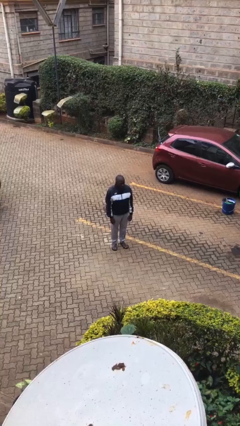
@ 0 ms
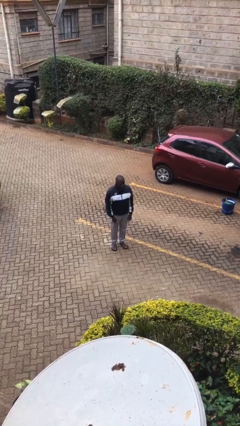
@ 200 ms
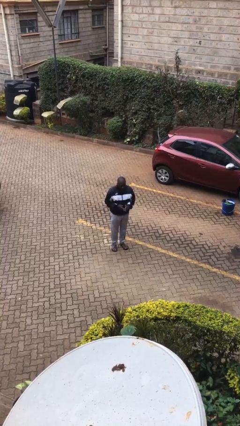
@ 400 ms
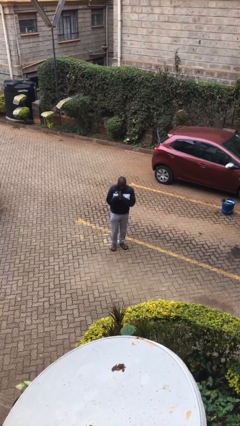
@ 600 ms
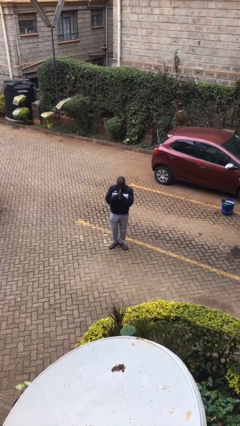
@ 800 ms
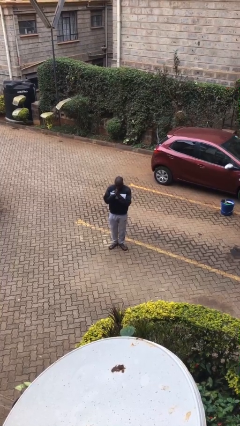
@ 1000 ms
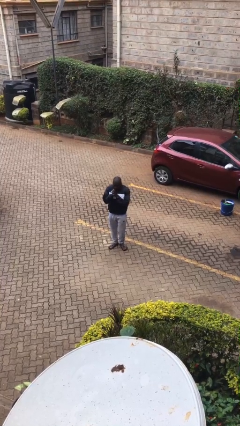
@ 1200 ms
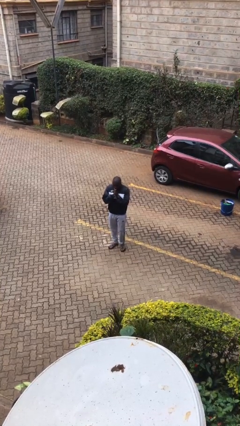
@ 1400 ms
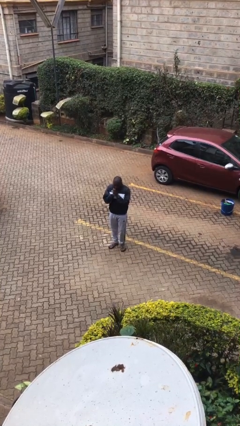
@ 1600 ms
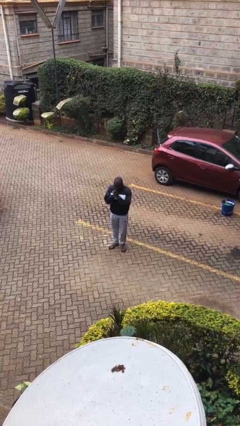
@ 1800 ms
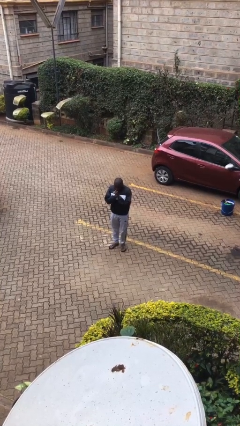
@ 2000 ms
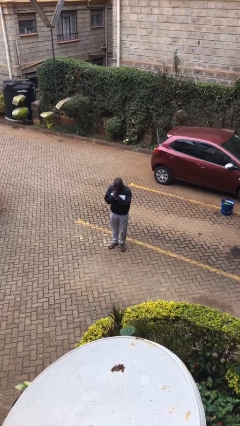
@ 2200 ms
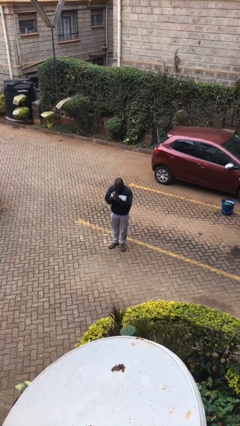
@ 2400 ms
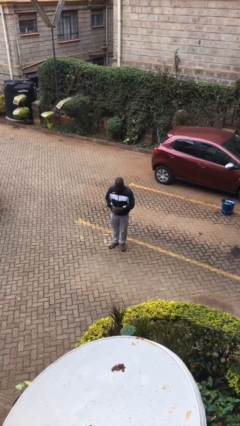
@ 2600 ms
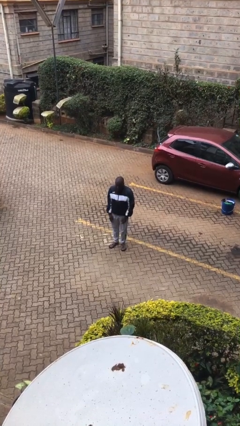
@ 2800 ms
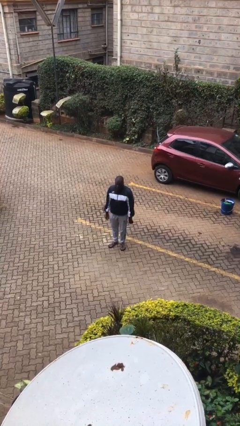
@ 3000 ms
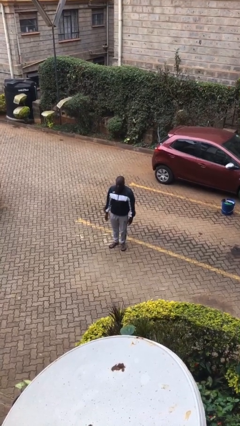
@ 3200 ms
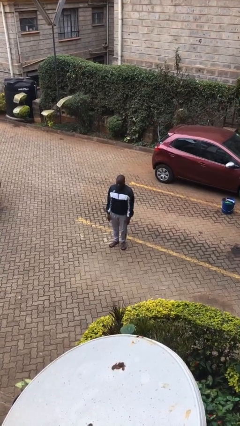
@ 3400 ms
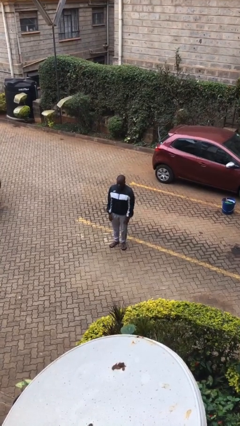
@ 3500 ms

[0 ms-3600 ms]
person blows into hands

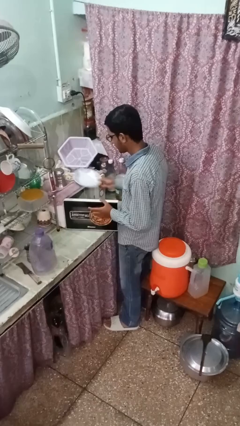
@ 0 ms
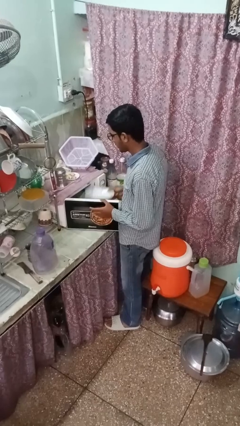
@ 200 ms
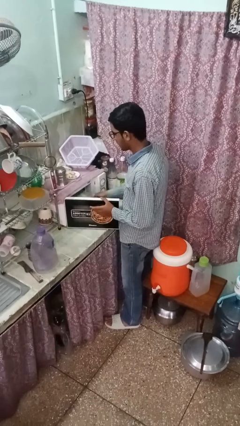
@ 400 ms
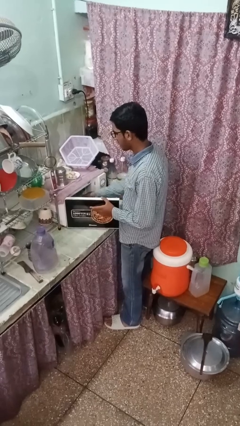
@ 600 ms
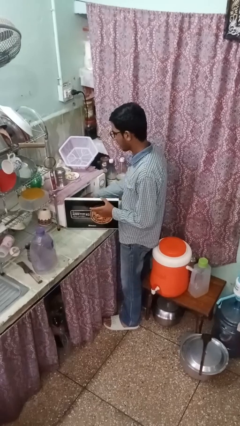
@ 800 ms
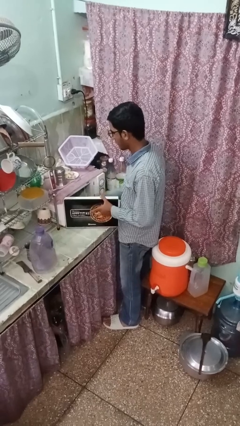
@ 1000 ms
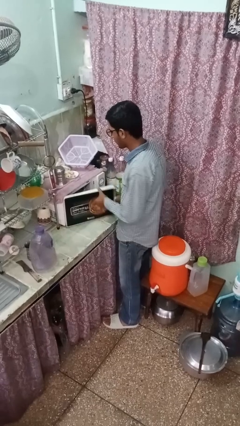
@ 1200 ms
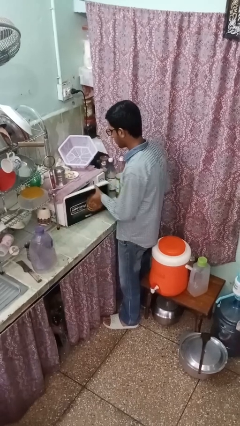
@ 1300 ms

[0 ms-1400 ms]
person puts object into oven

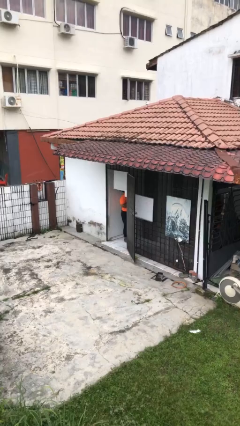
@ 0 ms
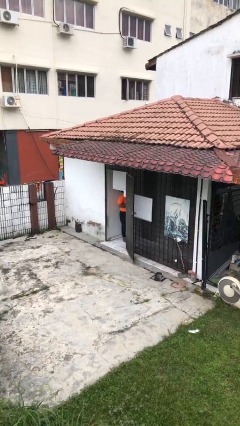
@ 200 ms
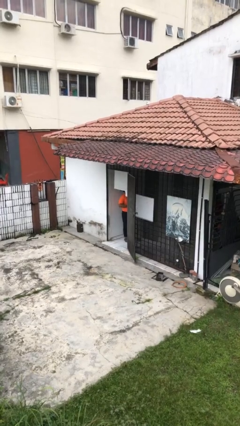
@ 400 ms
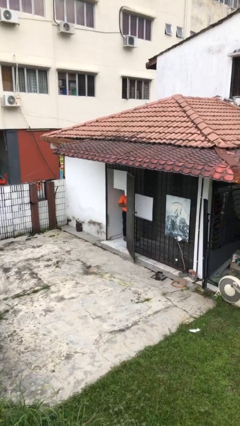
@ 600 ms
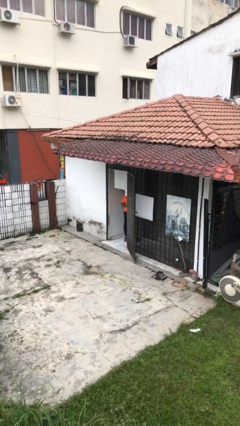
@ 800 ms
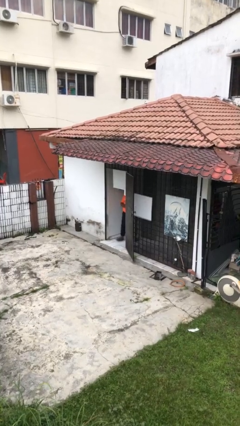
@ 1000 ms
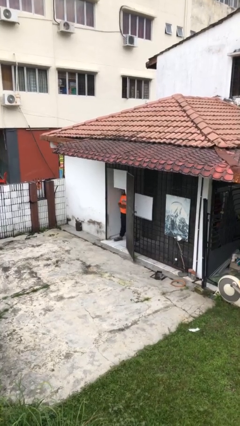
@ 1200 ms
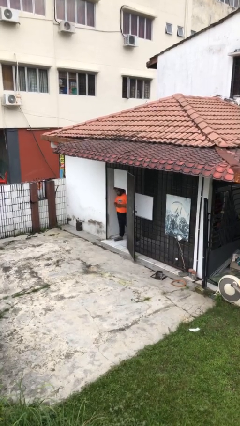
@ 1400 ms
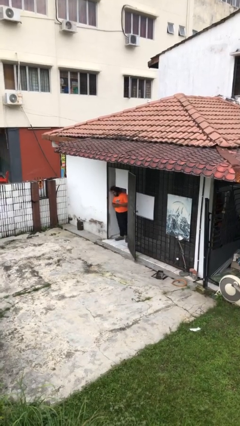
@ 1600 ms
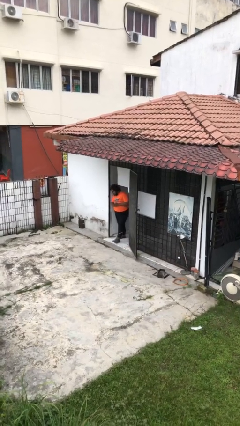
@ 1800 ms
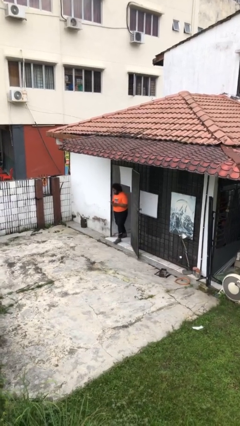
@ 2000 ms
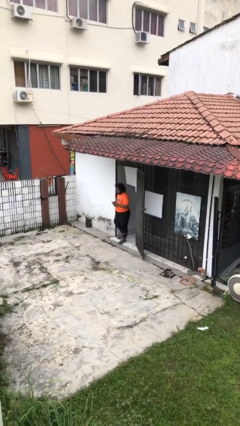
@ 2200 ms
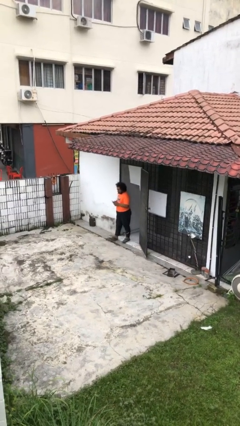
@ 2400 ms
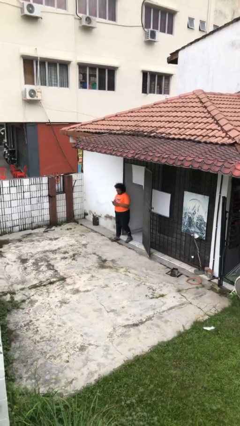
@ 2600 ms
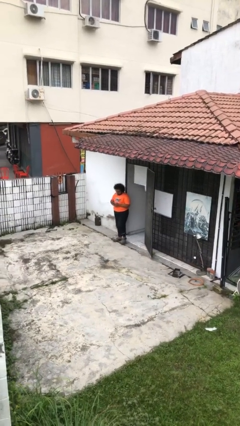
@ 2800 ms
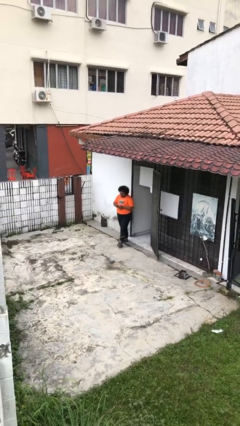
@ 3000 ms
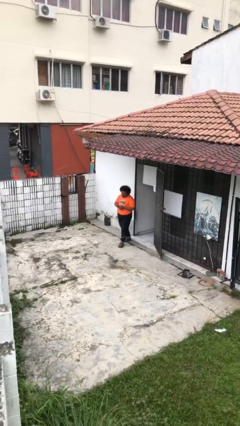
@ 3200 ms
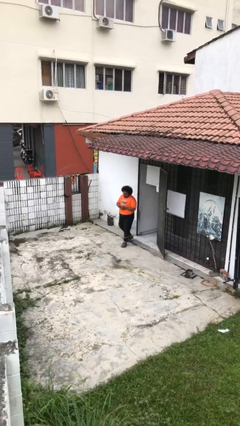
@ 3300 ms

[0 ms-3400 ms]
person enters scene through structure

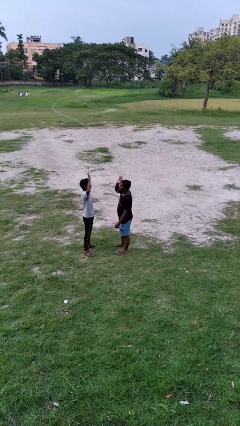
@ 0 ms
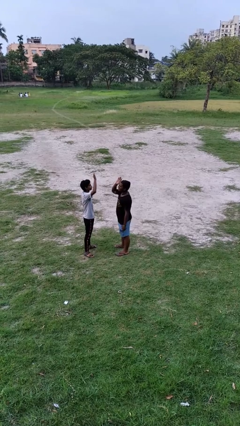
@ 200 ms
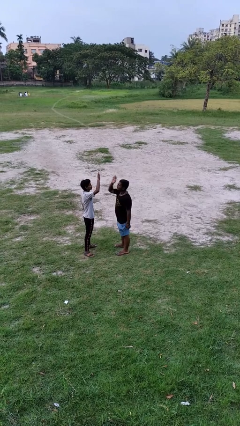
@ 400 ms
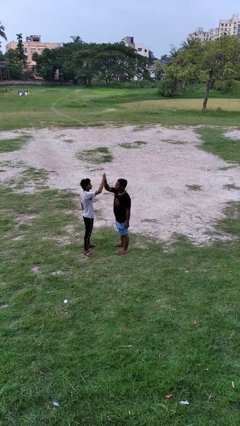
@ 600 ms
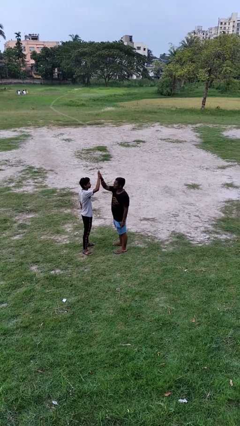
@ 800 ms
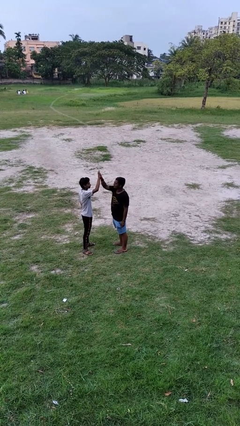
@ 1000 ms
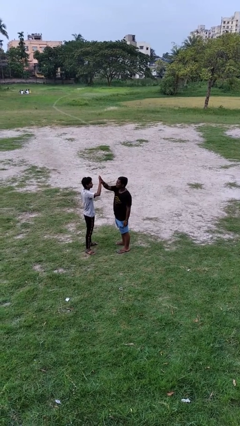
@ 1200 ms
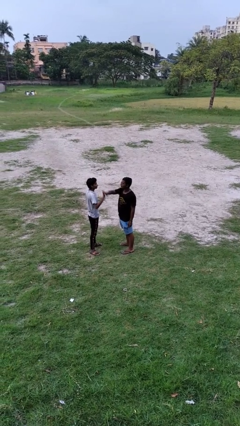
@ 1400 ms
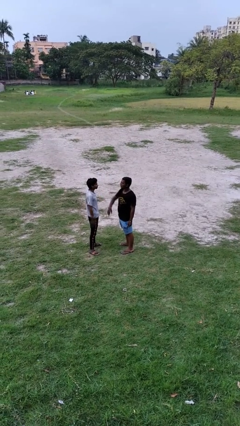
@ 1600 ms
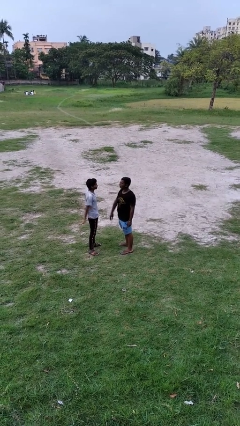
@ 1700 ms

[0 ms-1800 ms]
person highfives hand

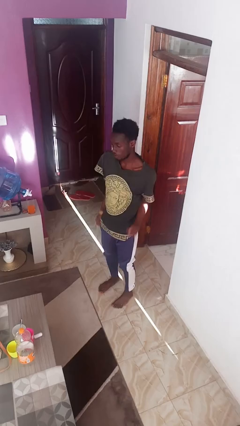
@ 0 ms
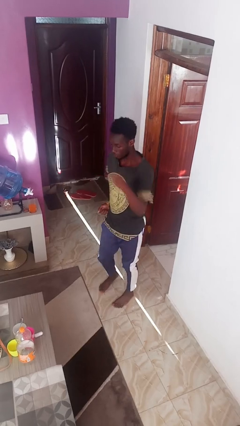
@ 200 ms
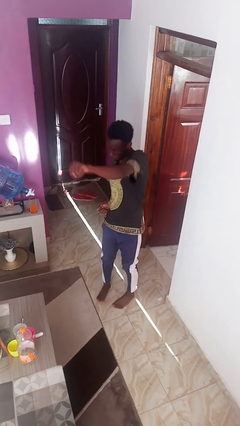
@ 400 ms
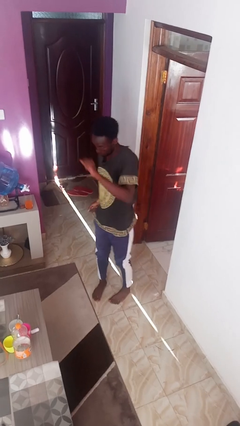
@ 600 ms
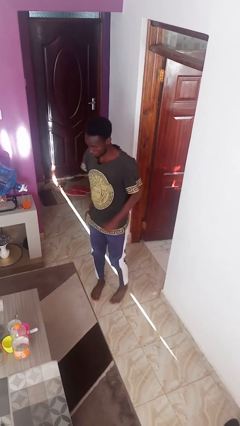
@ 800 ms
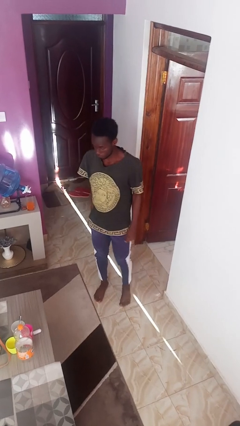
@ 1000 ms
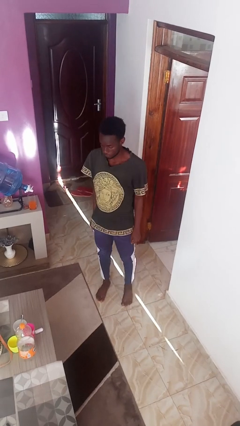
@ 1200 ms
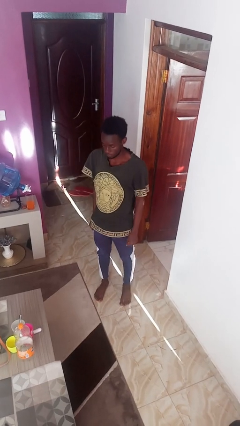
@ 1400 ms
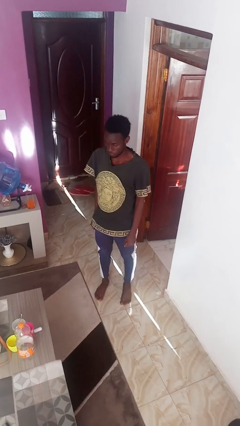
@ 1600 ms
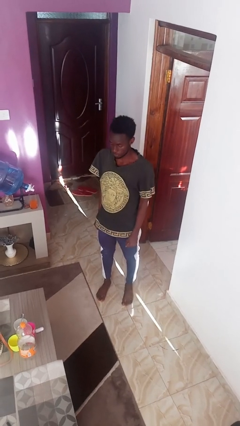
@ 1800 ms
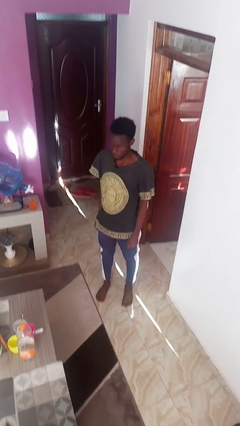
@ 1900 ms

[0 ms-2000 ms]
person punches

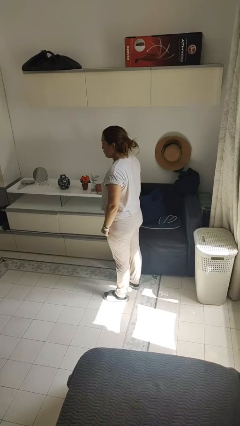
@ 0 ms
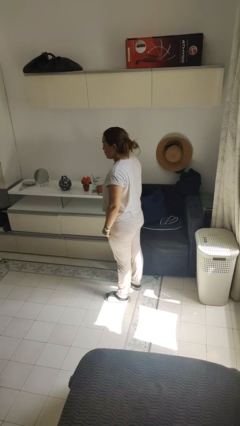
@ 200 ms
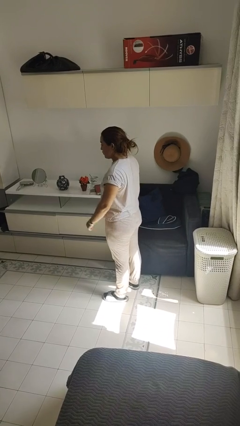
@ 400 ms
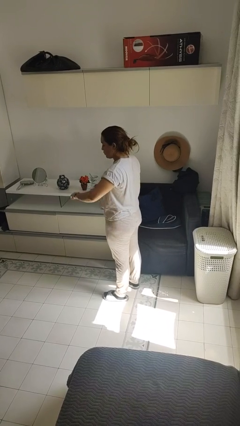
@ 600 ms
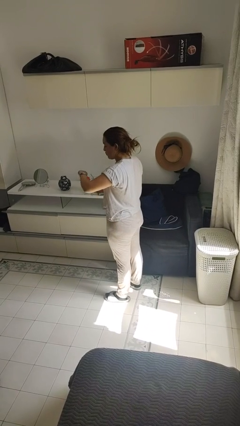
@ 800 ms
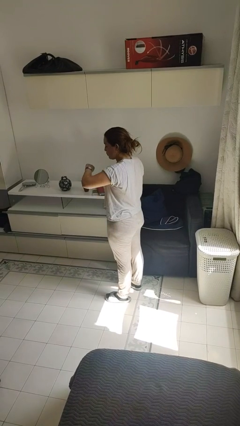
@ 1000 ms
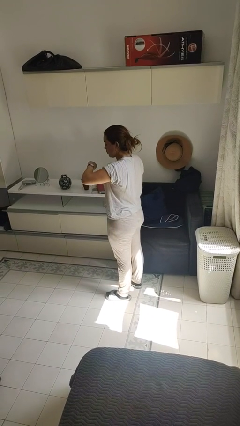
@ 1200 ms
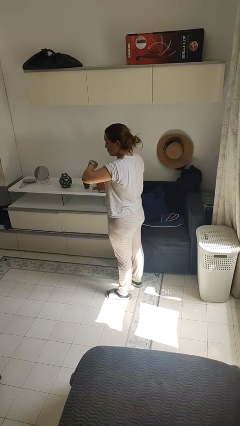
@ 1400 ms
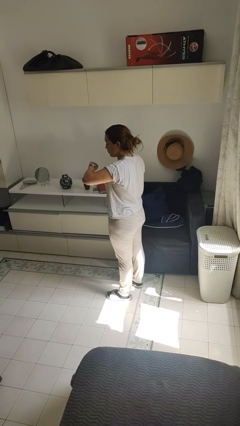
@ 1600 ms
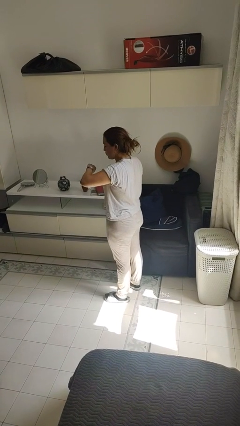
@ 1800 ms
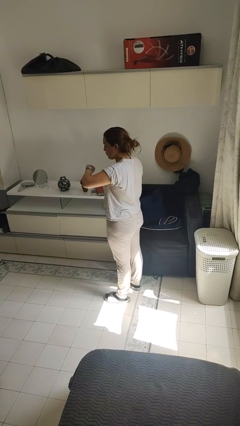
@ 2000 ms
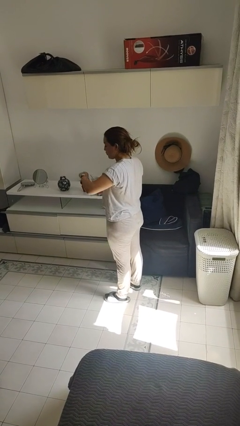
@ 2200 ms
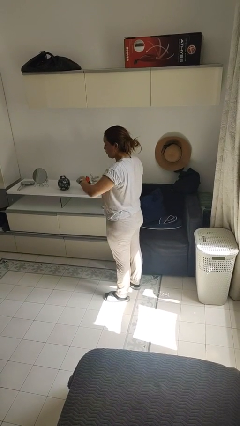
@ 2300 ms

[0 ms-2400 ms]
person looks at wristwatch

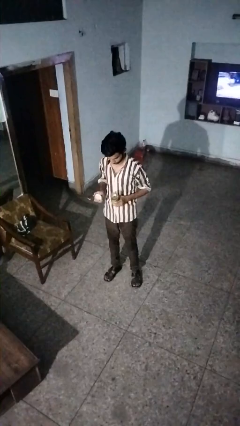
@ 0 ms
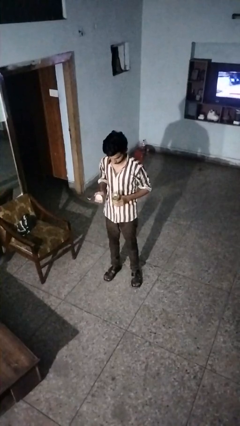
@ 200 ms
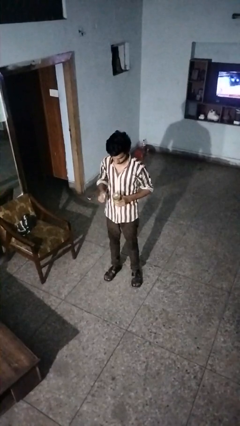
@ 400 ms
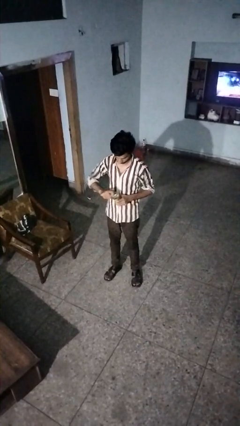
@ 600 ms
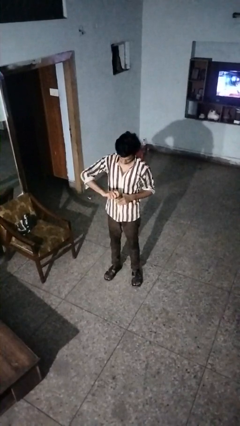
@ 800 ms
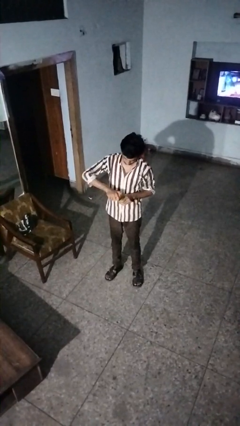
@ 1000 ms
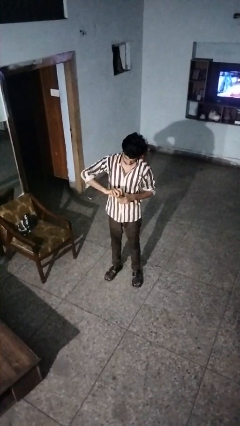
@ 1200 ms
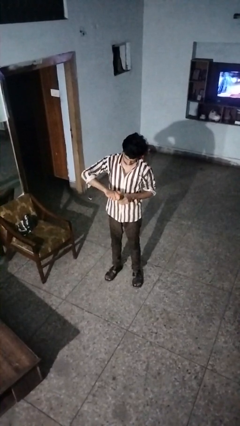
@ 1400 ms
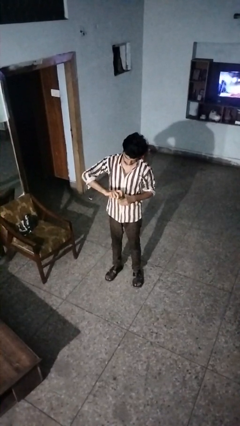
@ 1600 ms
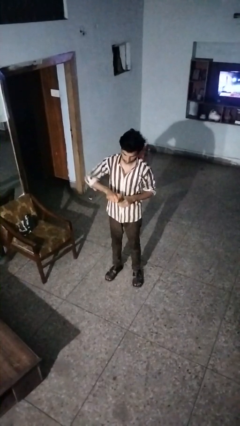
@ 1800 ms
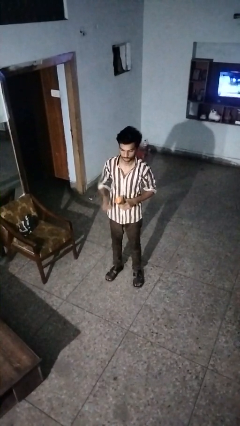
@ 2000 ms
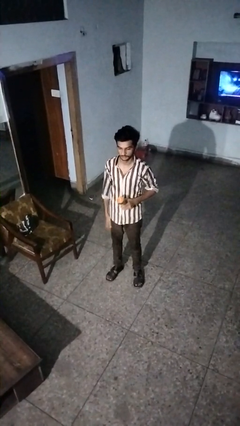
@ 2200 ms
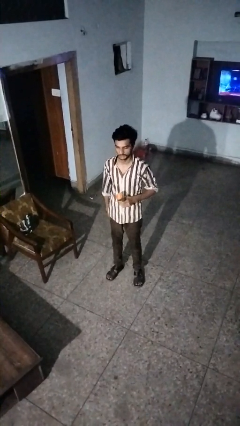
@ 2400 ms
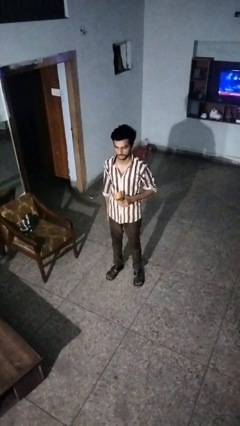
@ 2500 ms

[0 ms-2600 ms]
person closes jar
